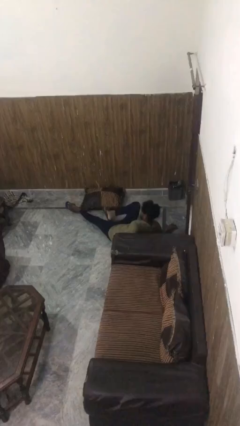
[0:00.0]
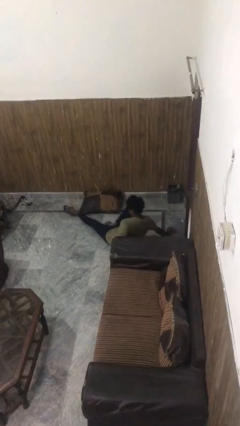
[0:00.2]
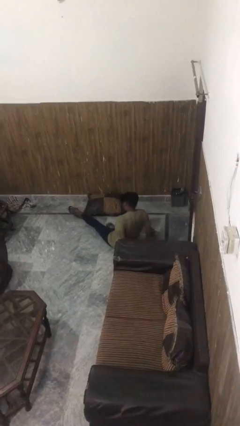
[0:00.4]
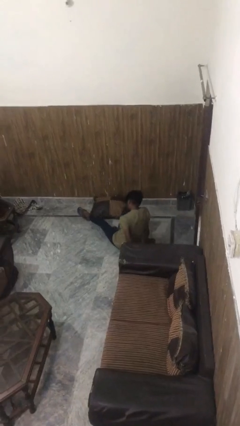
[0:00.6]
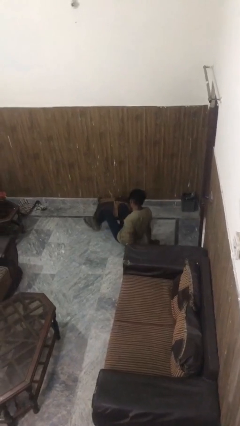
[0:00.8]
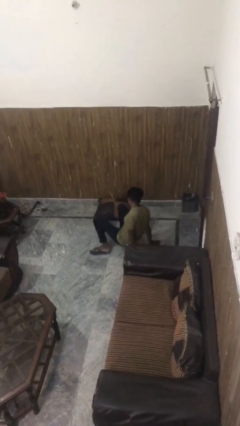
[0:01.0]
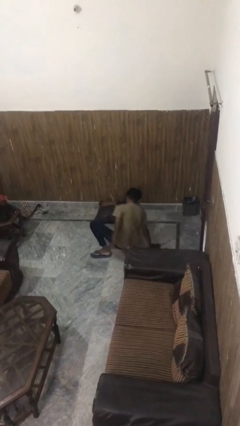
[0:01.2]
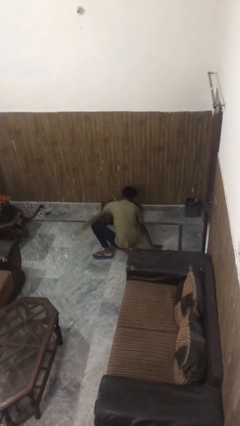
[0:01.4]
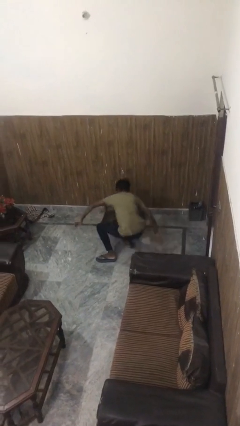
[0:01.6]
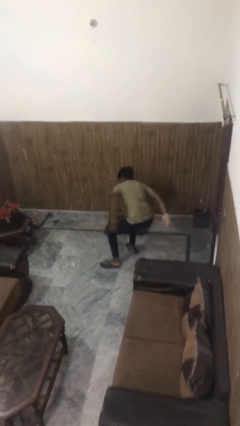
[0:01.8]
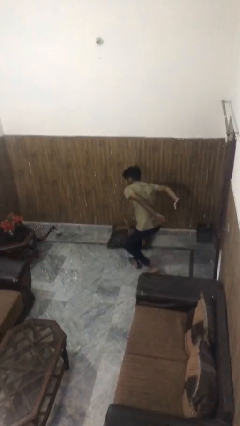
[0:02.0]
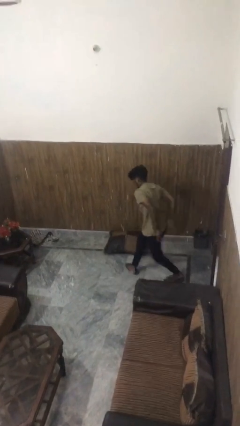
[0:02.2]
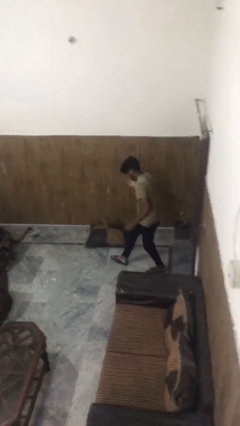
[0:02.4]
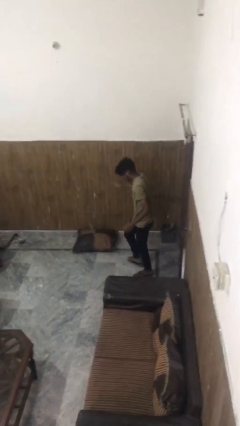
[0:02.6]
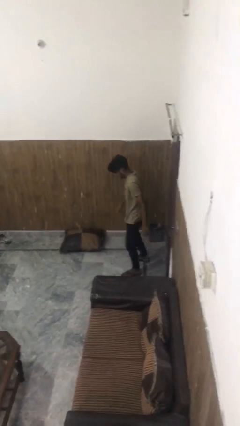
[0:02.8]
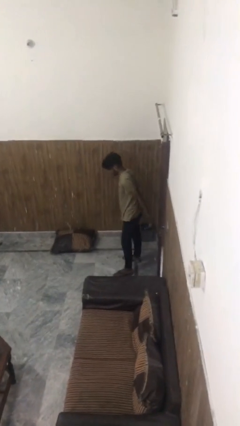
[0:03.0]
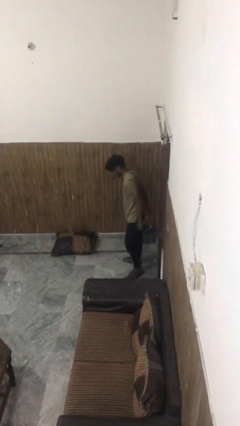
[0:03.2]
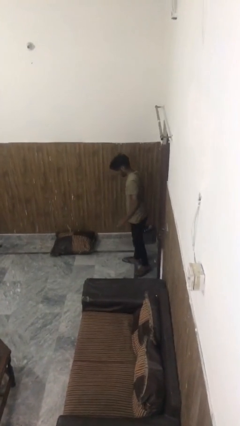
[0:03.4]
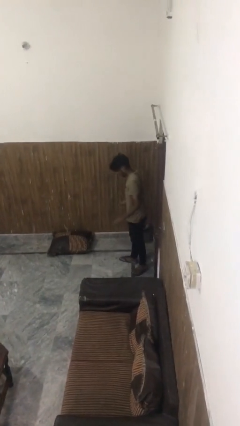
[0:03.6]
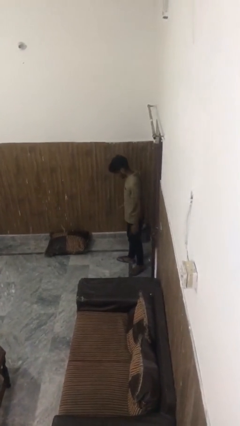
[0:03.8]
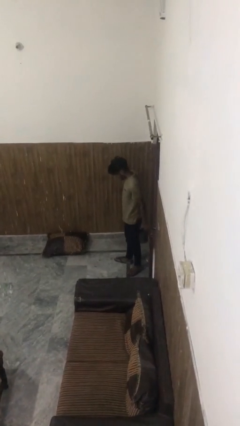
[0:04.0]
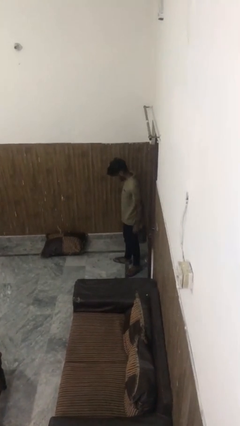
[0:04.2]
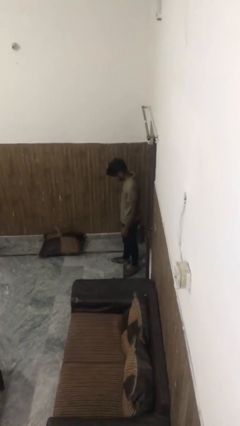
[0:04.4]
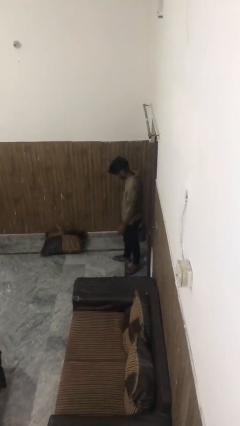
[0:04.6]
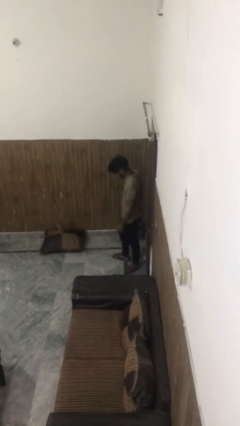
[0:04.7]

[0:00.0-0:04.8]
person stands up from floor

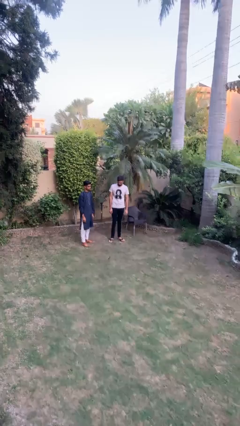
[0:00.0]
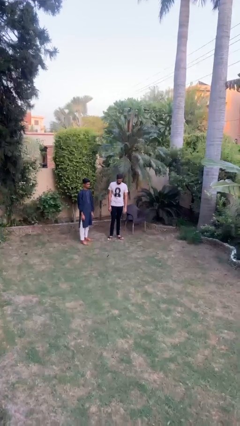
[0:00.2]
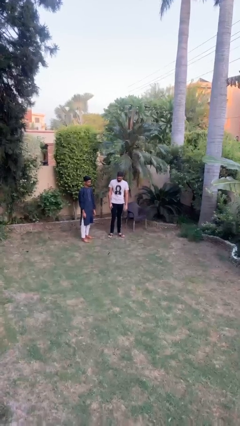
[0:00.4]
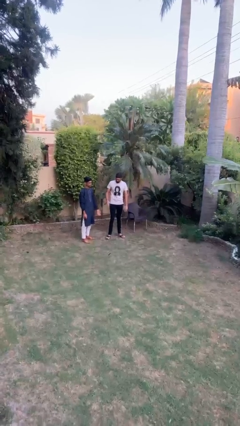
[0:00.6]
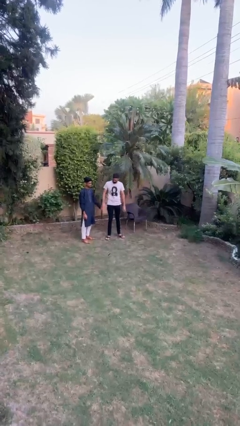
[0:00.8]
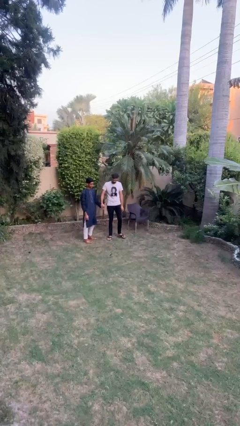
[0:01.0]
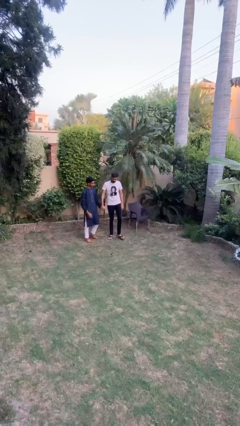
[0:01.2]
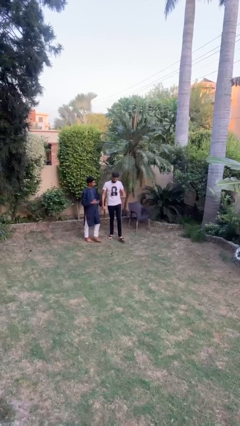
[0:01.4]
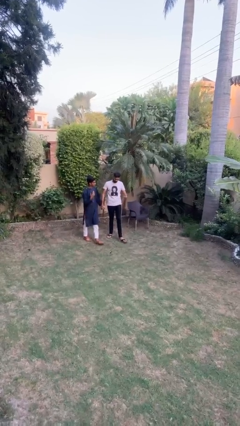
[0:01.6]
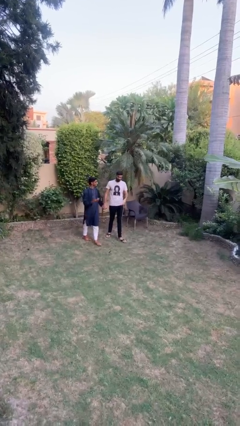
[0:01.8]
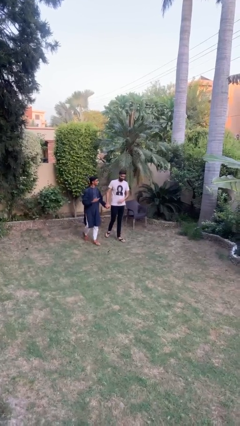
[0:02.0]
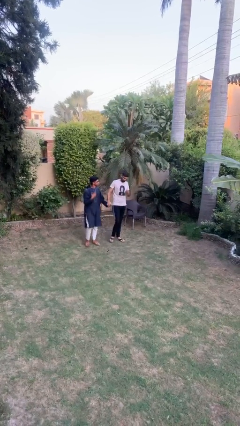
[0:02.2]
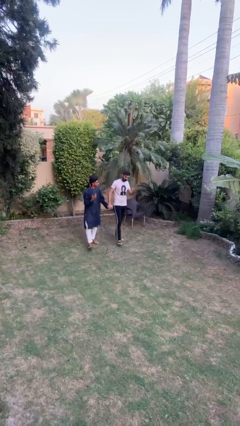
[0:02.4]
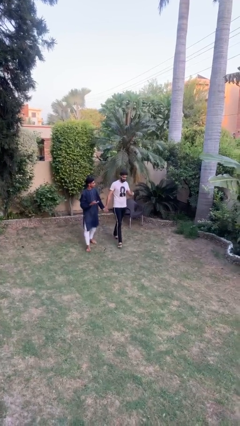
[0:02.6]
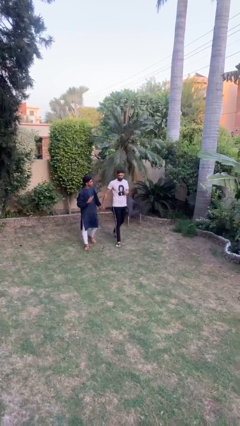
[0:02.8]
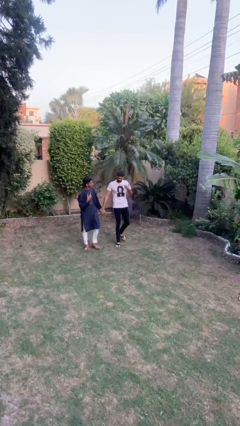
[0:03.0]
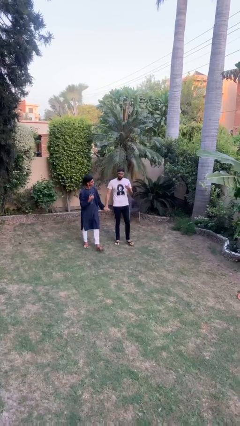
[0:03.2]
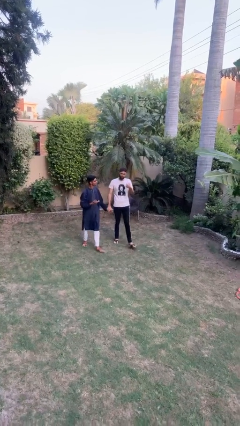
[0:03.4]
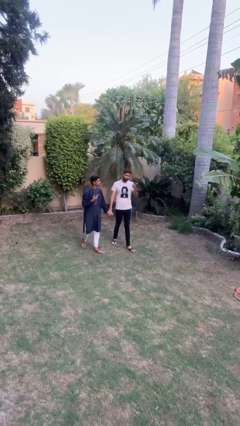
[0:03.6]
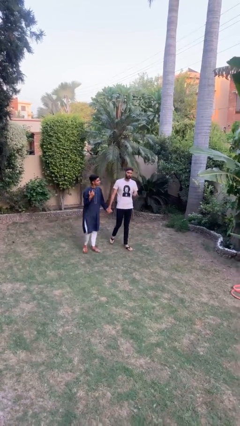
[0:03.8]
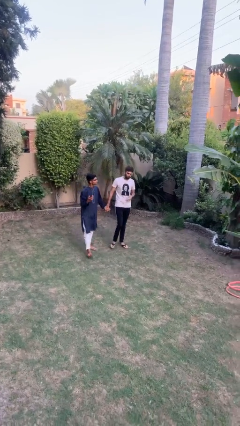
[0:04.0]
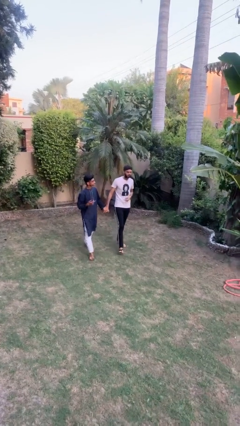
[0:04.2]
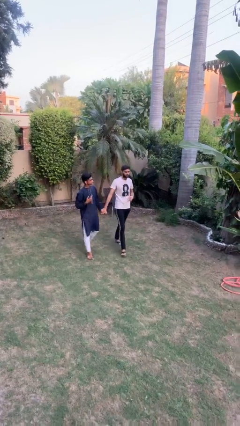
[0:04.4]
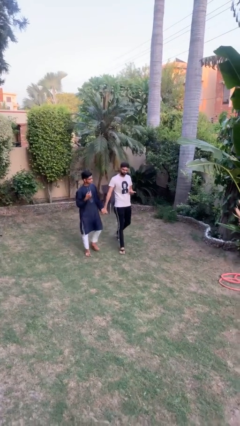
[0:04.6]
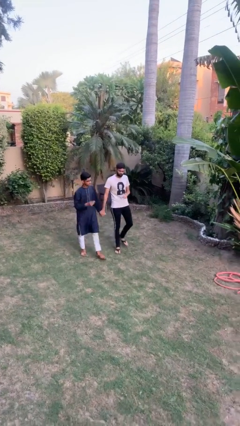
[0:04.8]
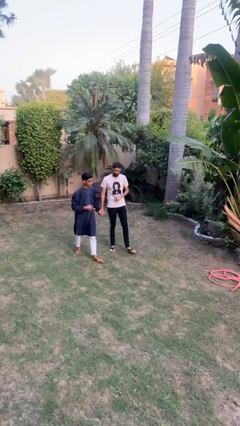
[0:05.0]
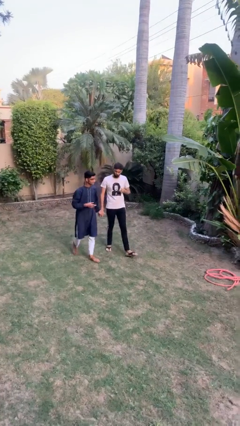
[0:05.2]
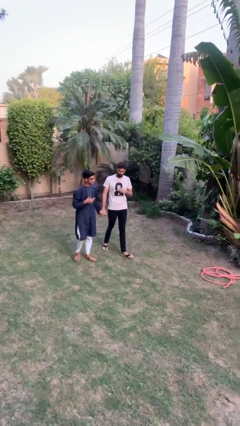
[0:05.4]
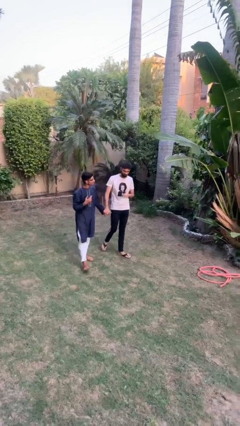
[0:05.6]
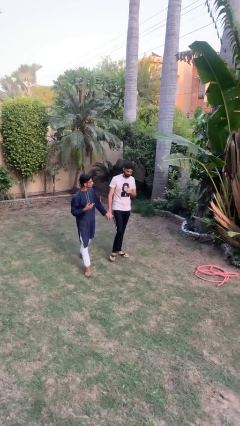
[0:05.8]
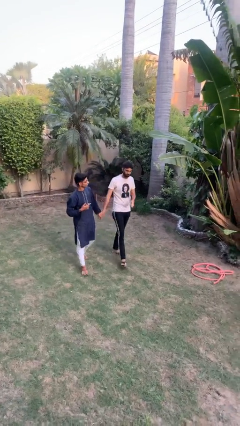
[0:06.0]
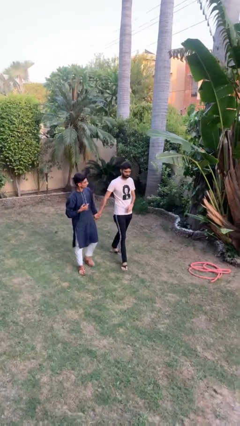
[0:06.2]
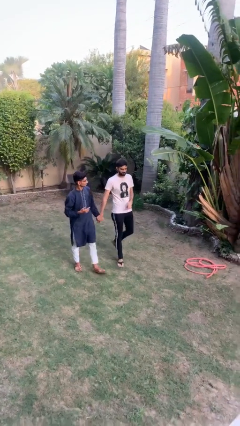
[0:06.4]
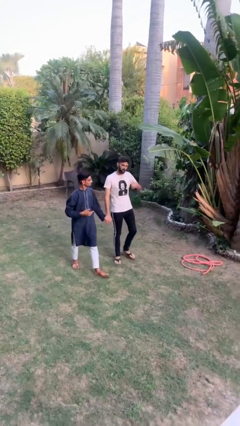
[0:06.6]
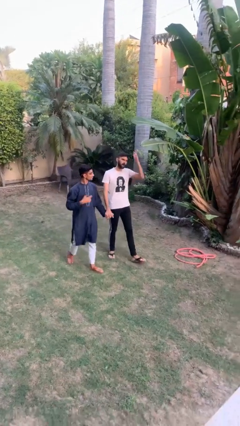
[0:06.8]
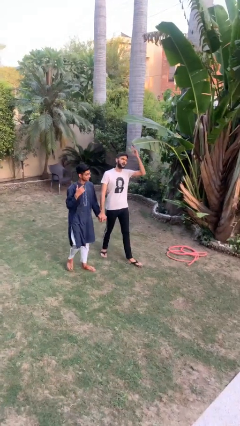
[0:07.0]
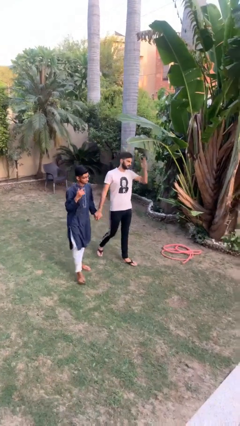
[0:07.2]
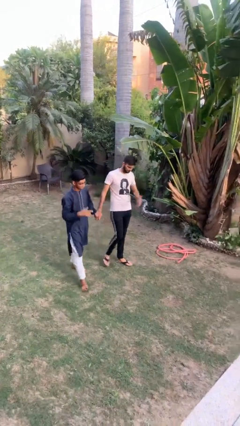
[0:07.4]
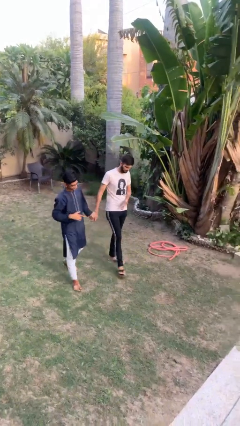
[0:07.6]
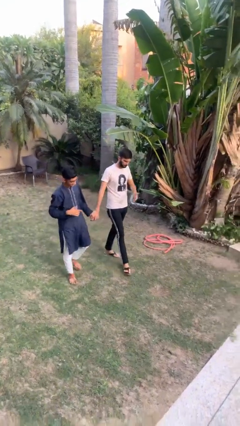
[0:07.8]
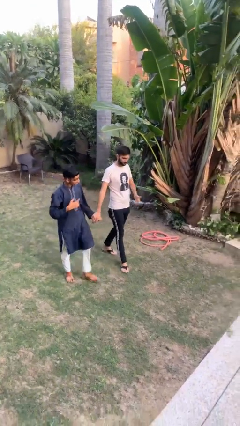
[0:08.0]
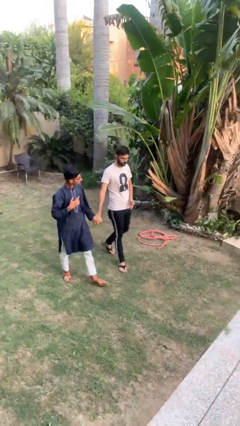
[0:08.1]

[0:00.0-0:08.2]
person holds hand

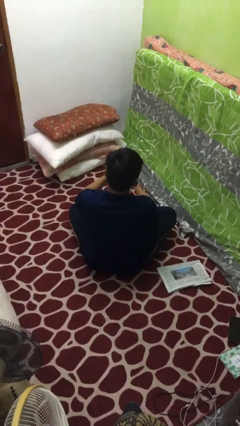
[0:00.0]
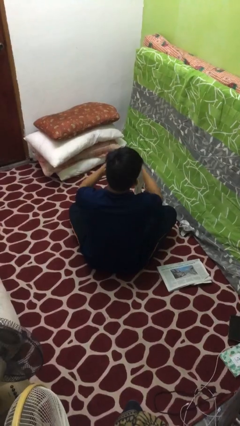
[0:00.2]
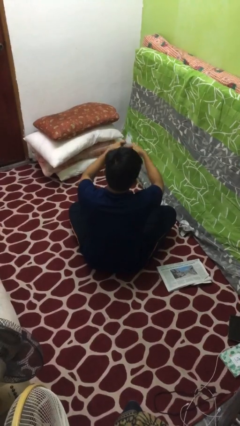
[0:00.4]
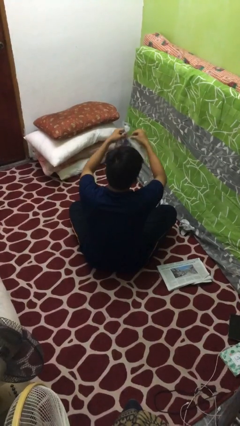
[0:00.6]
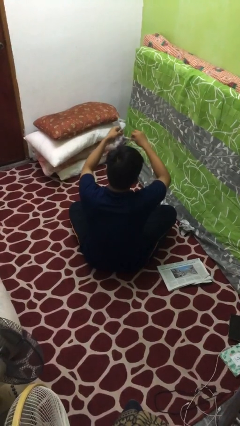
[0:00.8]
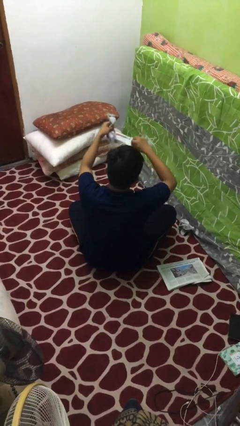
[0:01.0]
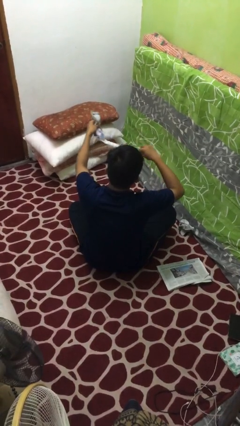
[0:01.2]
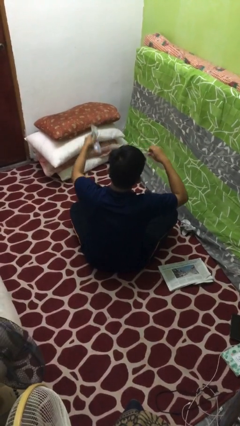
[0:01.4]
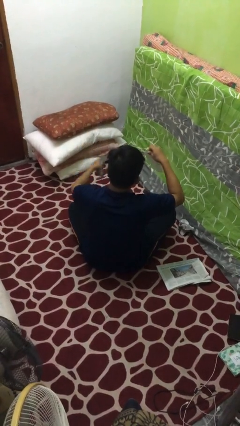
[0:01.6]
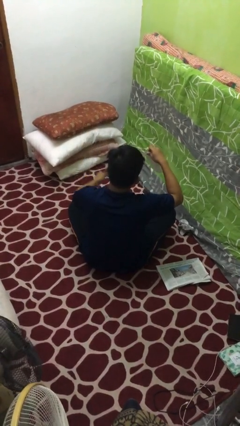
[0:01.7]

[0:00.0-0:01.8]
person tears paper

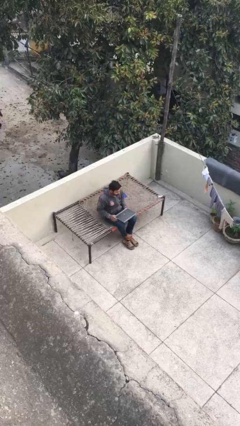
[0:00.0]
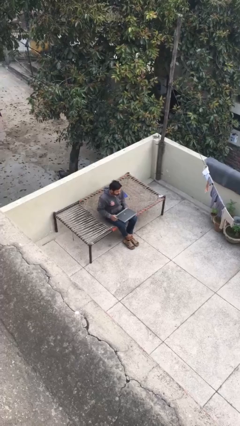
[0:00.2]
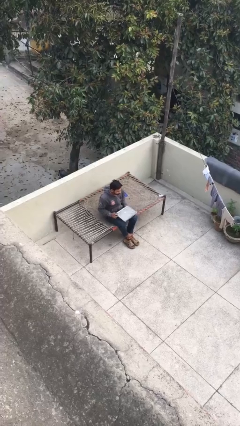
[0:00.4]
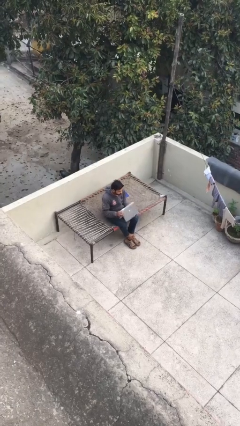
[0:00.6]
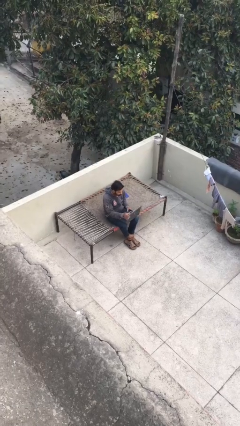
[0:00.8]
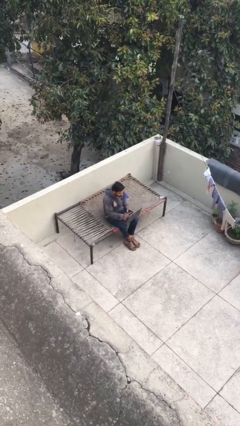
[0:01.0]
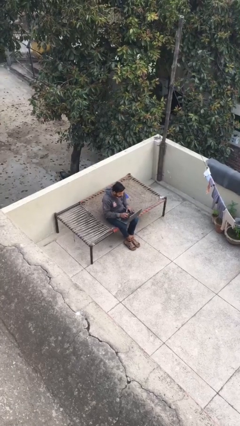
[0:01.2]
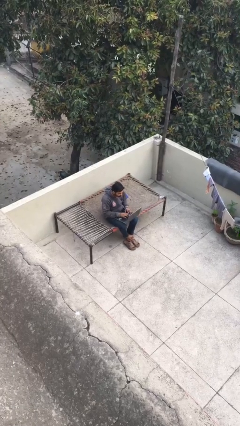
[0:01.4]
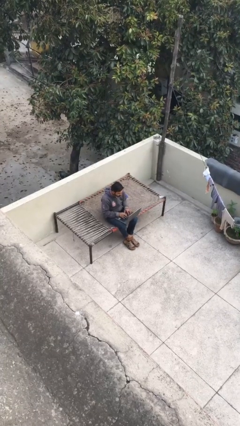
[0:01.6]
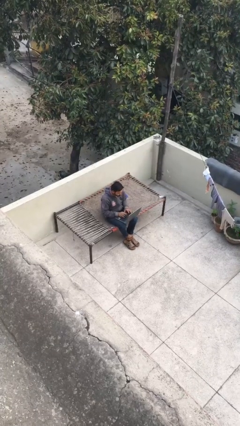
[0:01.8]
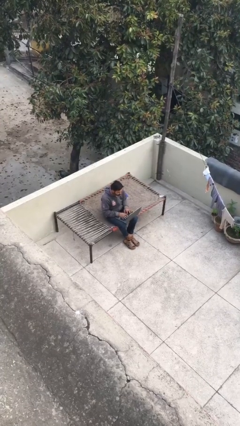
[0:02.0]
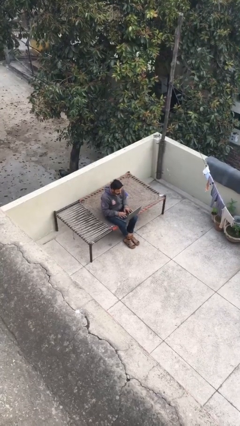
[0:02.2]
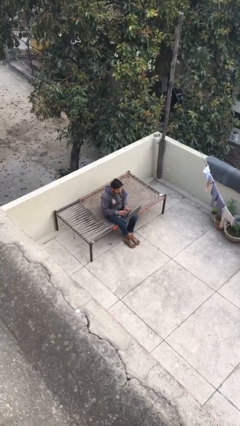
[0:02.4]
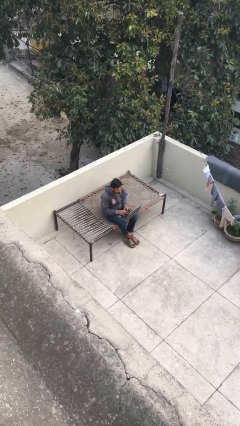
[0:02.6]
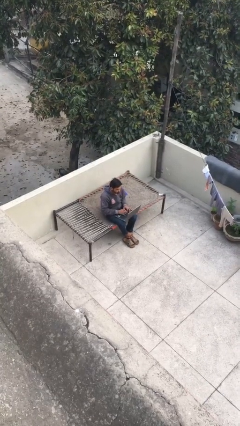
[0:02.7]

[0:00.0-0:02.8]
person interacts with laptop
